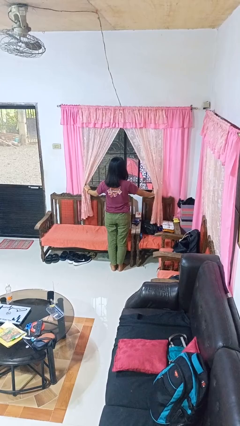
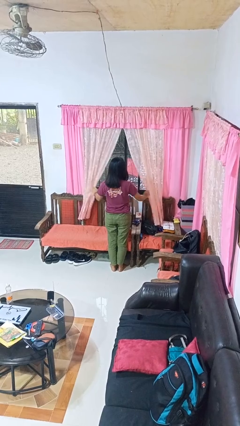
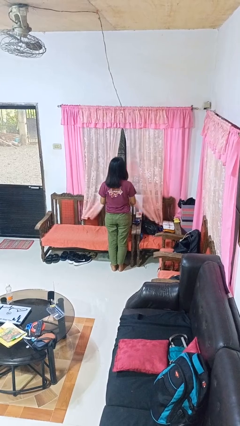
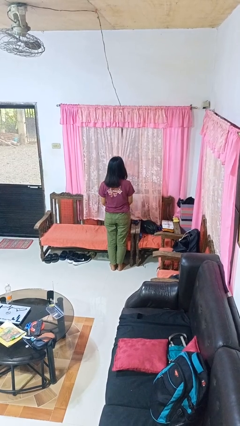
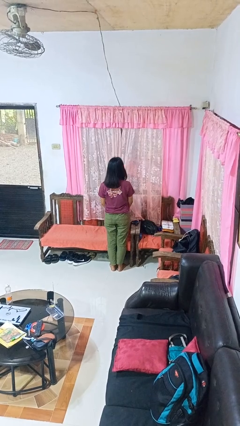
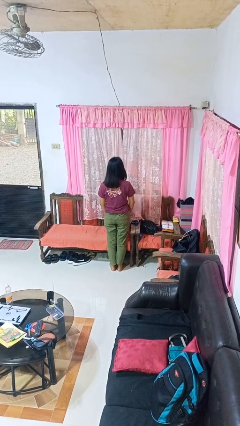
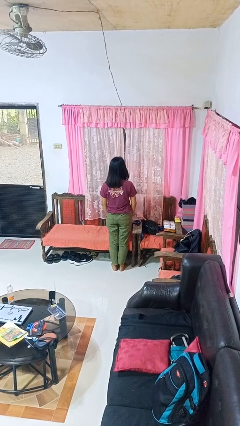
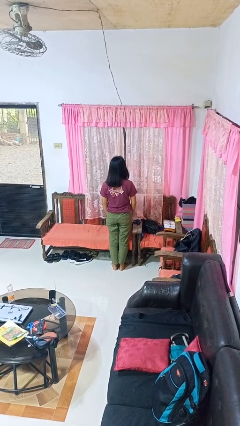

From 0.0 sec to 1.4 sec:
person closes curtains

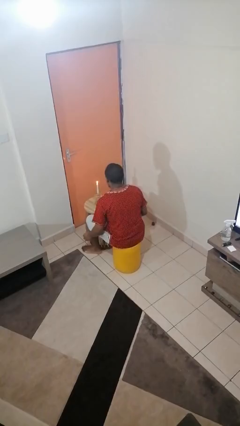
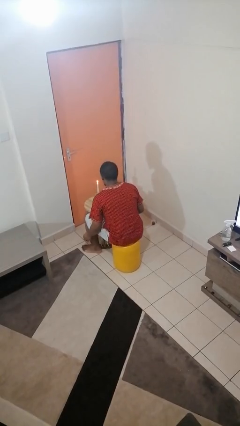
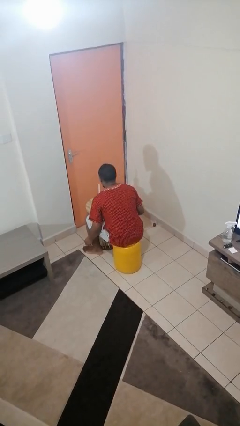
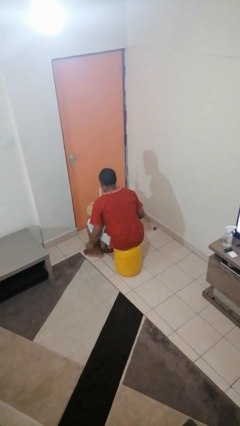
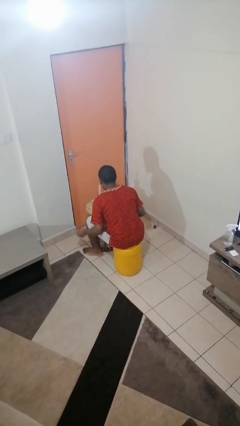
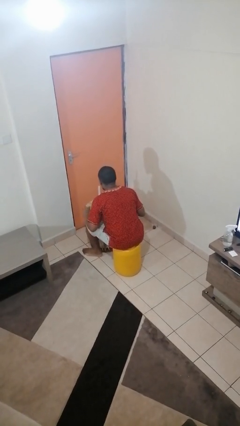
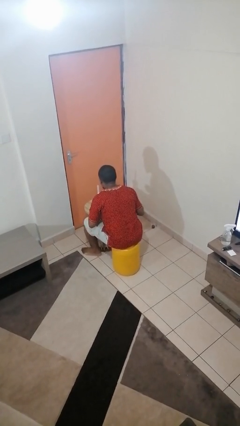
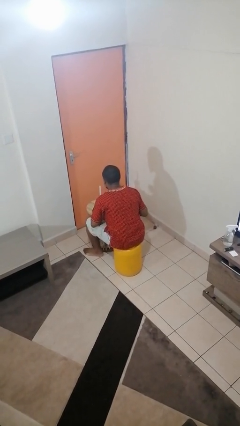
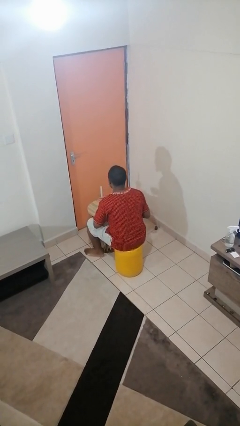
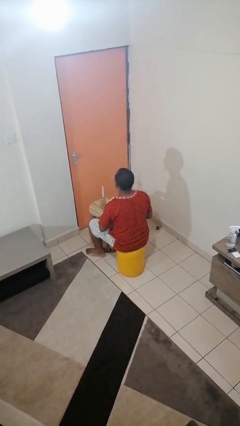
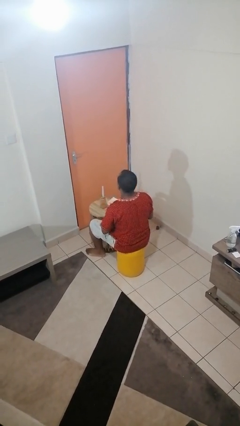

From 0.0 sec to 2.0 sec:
person extinguishes candle

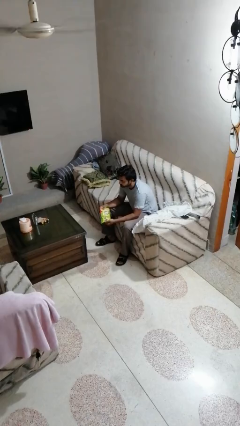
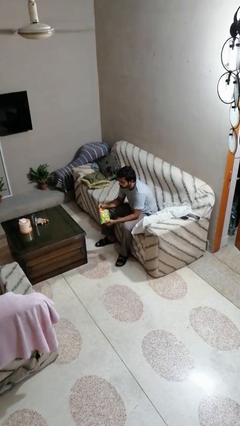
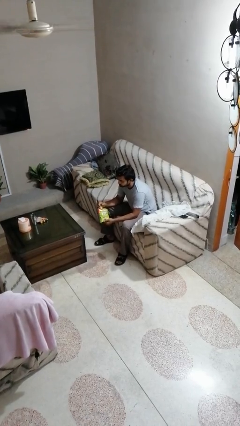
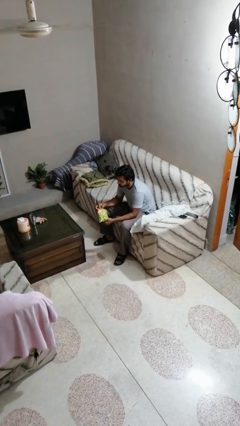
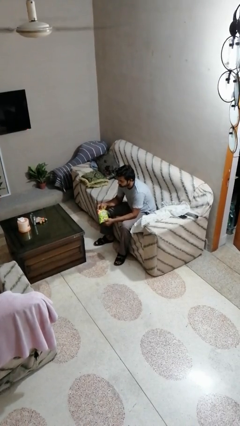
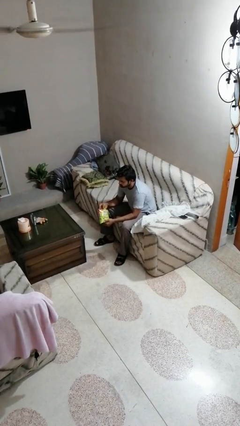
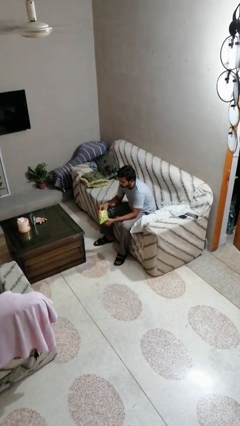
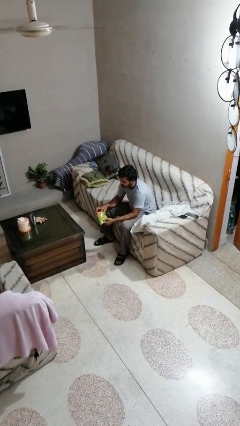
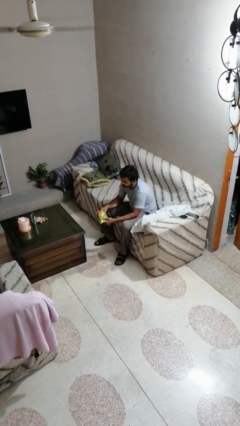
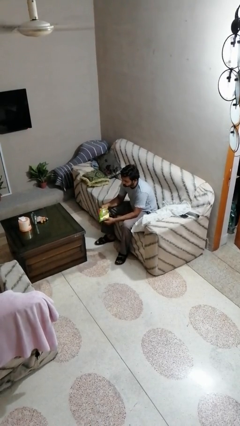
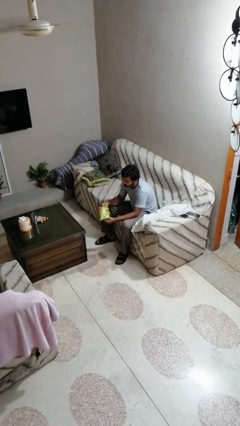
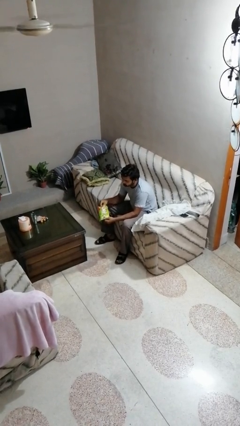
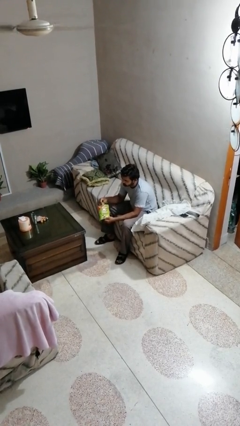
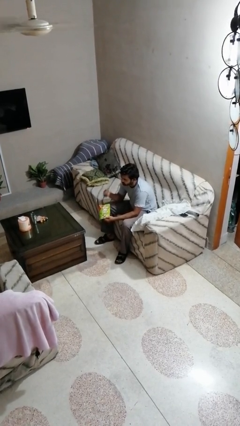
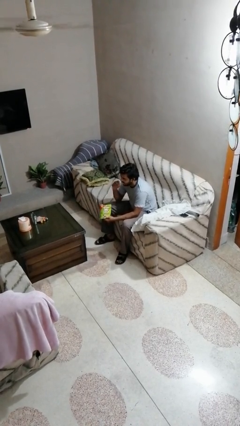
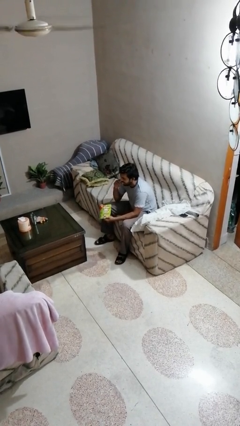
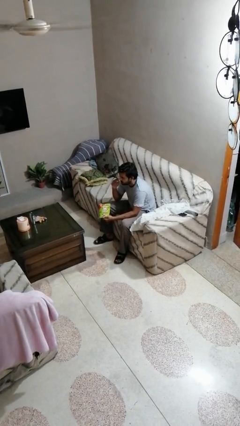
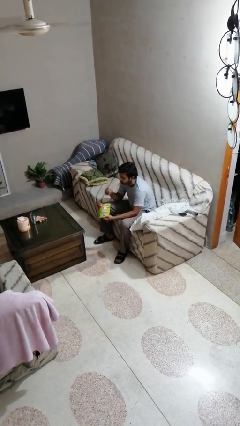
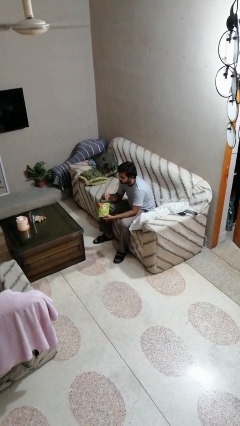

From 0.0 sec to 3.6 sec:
person eats snack from bag

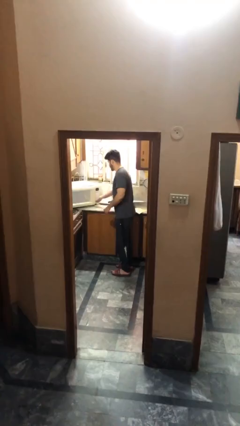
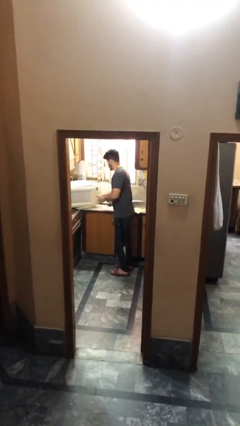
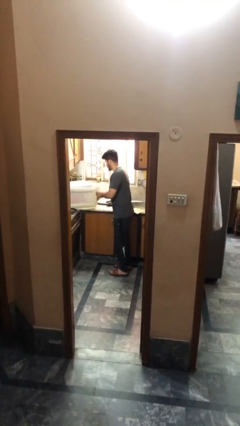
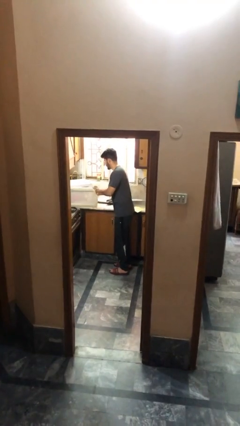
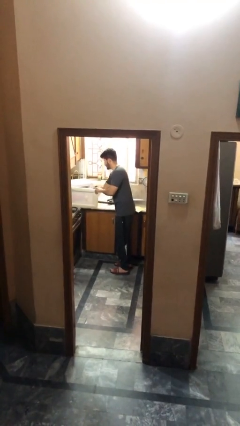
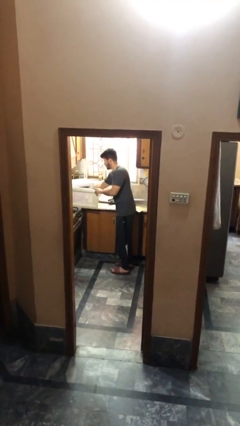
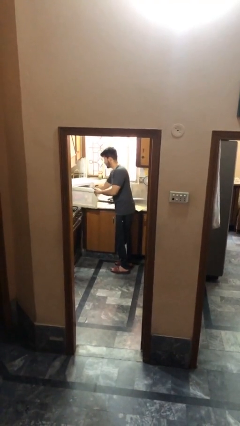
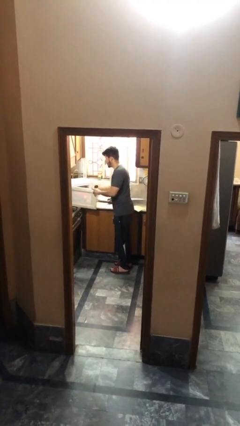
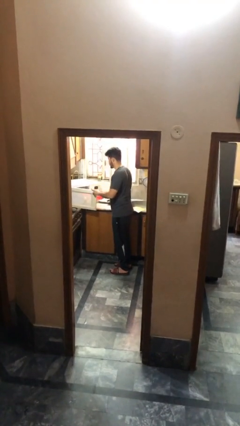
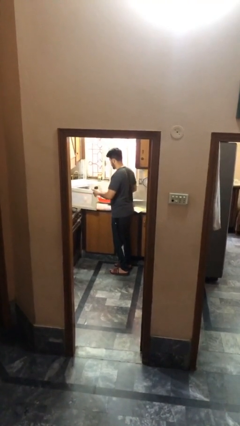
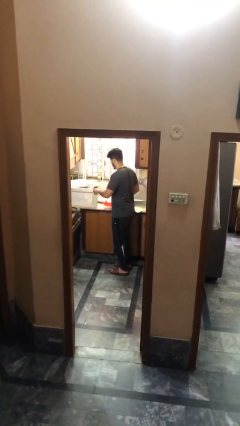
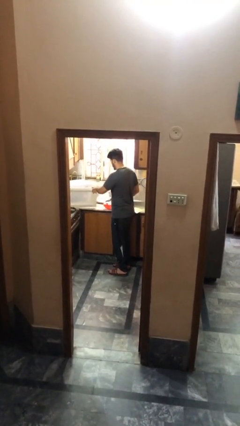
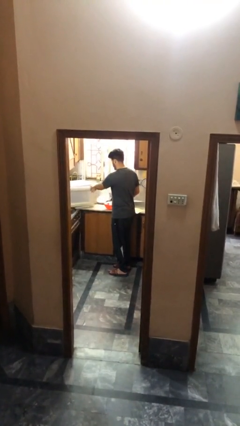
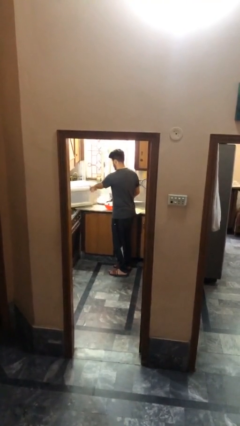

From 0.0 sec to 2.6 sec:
person takes object from microwave

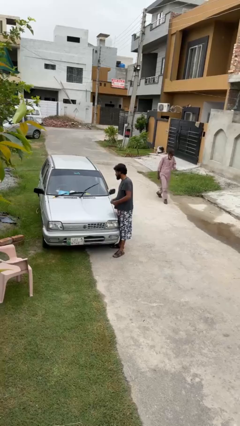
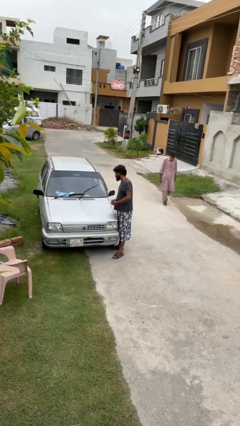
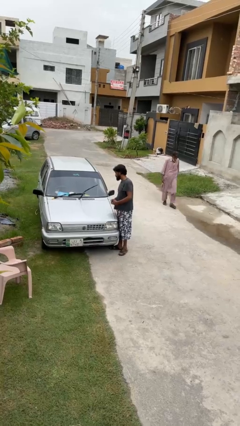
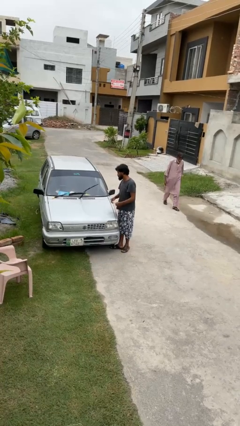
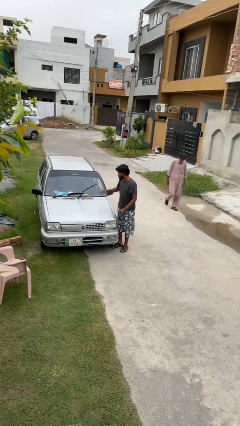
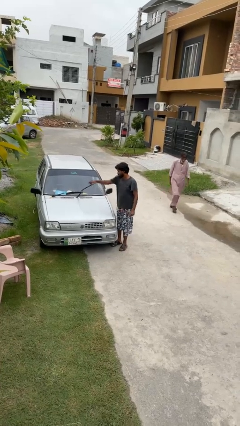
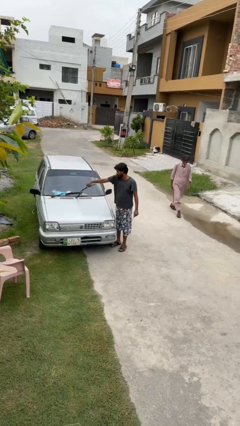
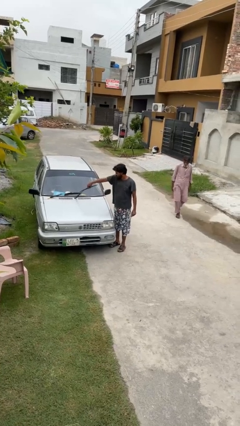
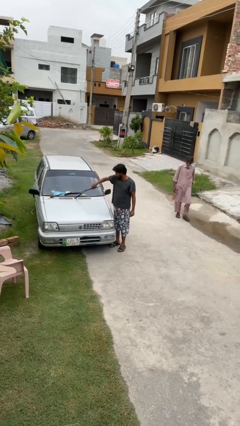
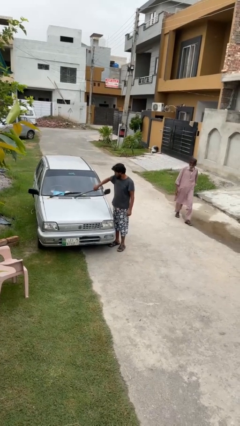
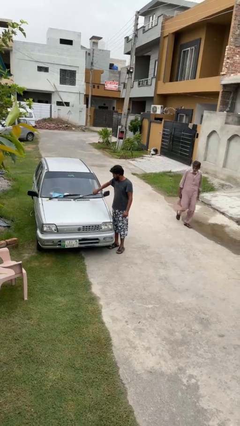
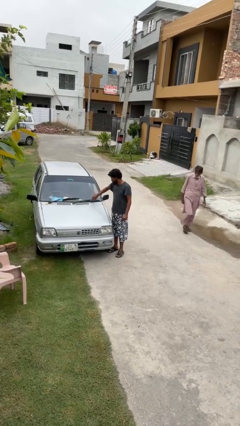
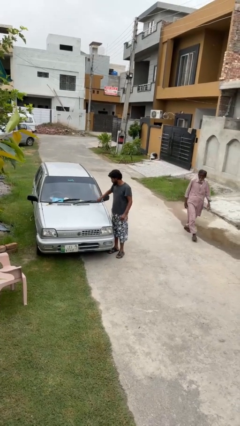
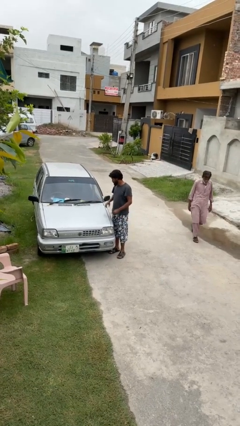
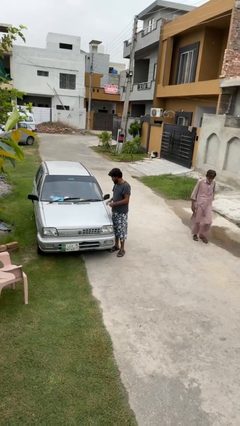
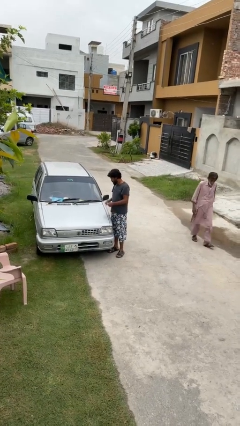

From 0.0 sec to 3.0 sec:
person flips down car wipers

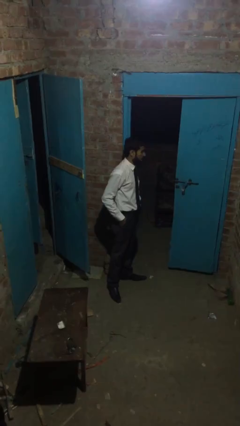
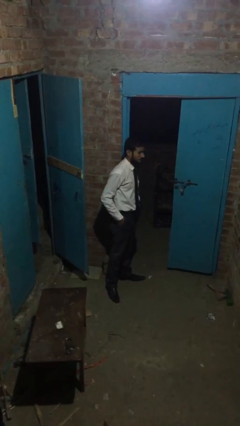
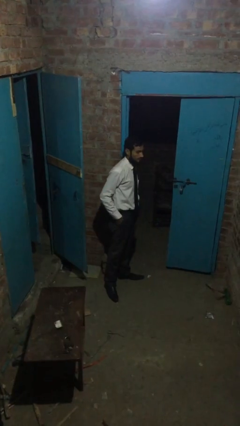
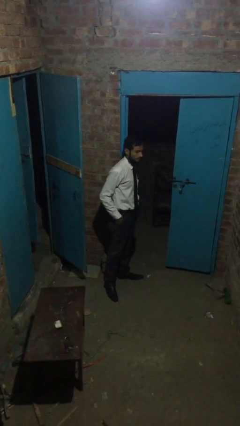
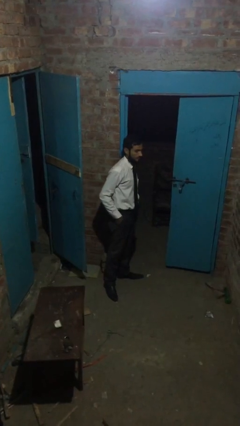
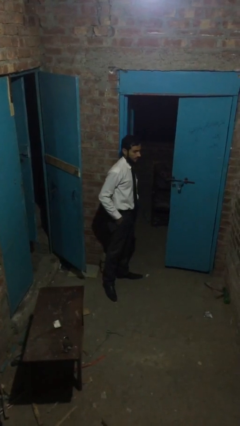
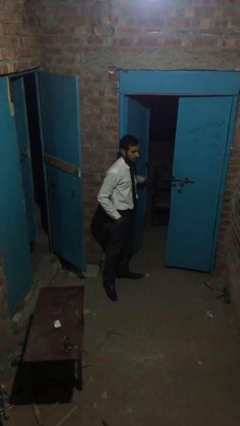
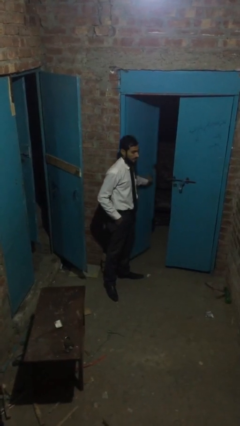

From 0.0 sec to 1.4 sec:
person closes facility door

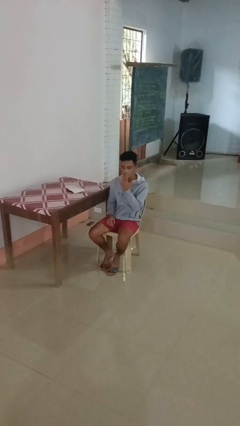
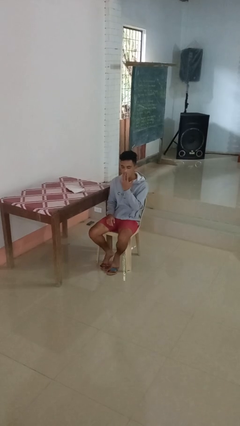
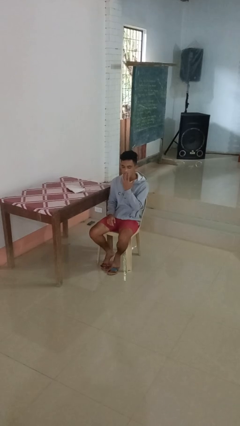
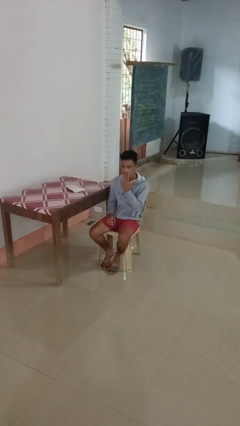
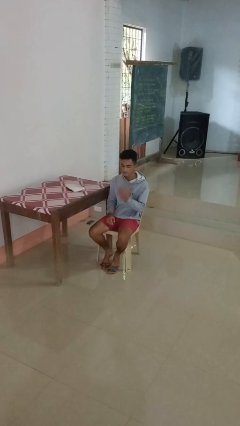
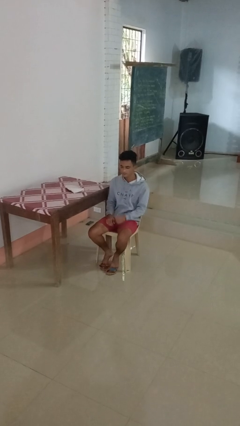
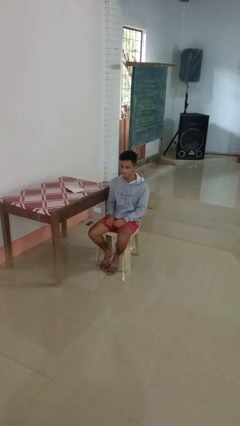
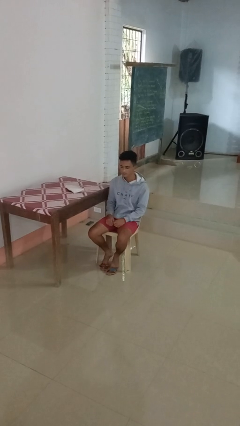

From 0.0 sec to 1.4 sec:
person licks fingers

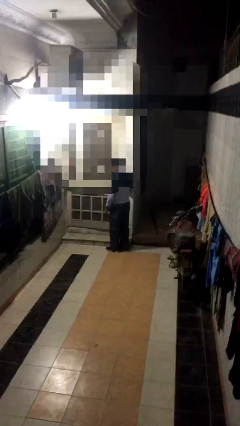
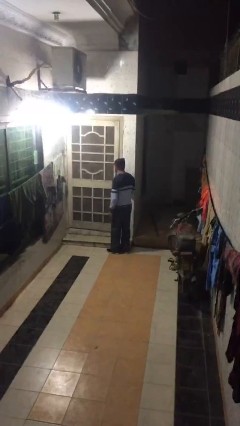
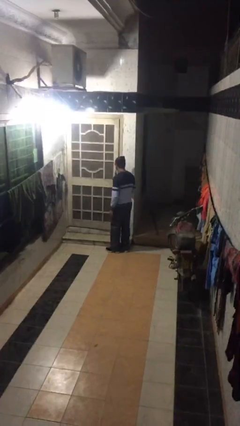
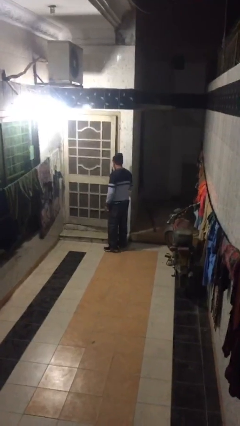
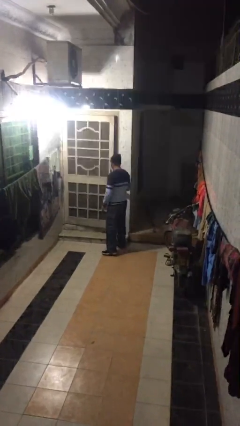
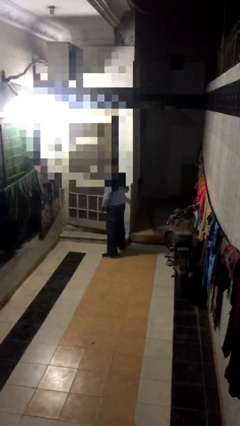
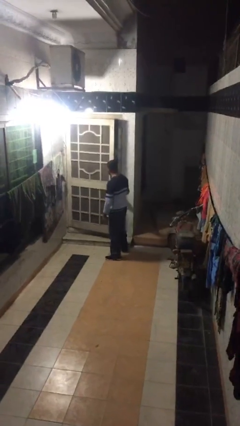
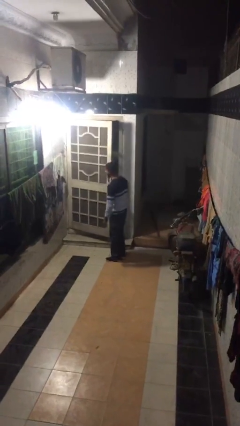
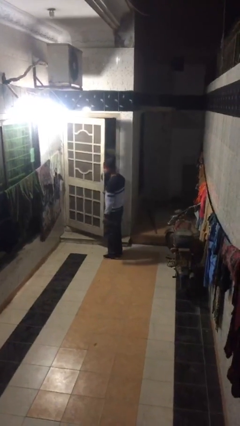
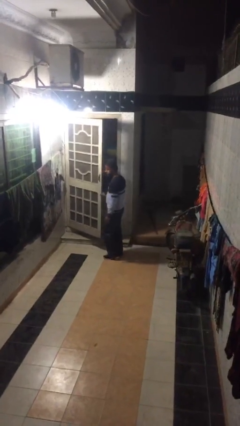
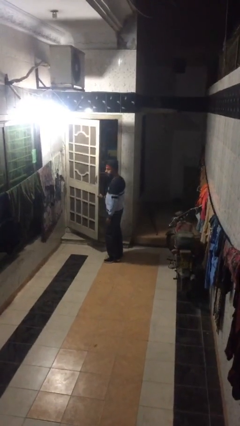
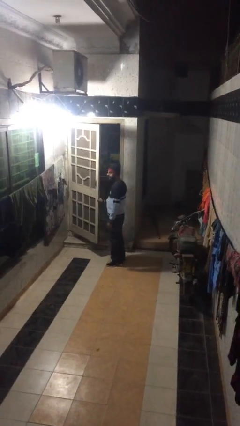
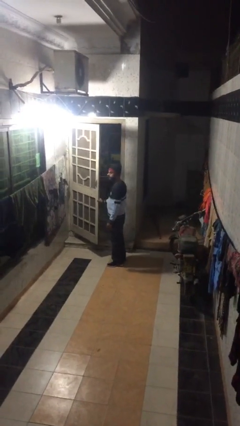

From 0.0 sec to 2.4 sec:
person opens facility door
